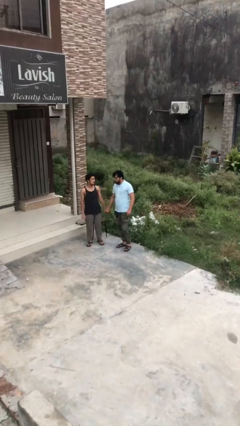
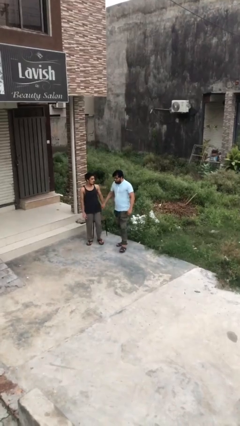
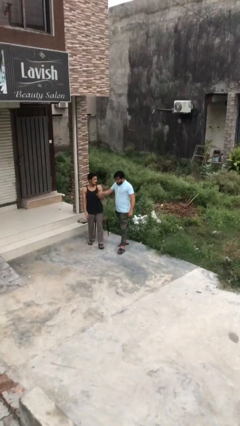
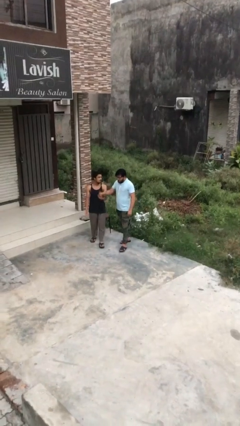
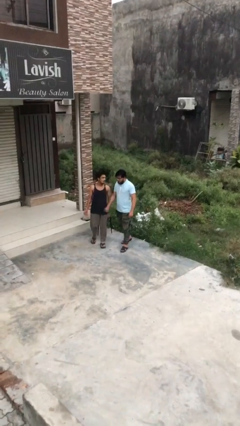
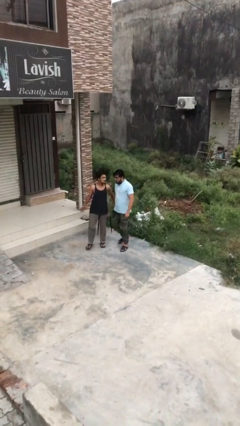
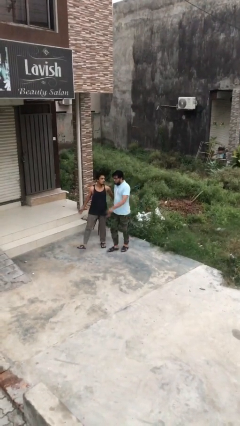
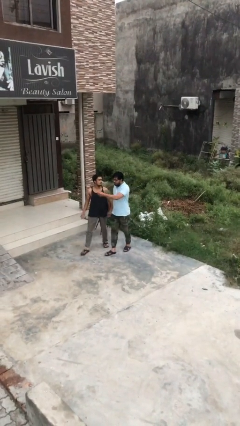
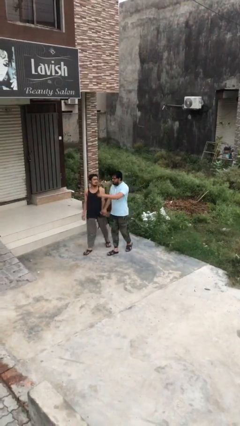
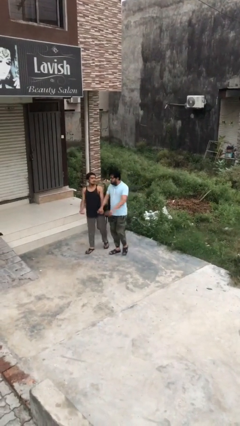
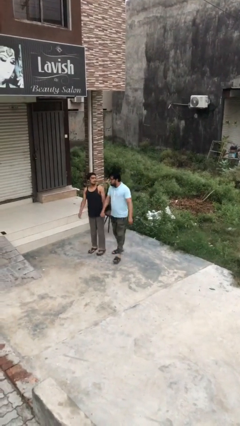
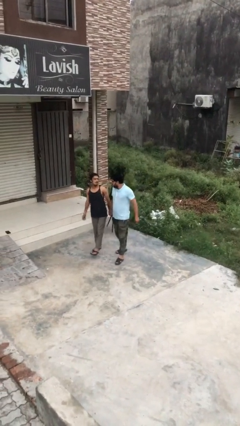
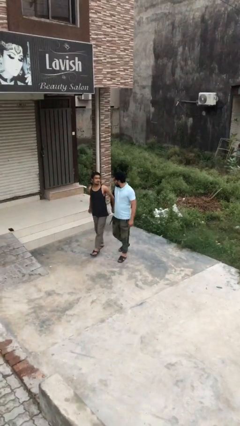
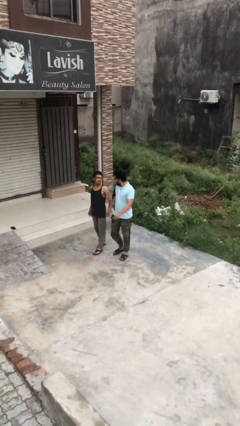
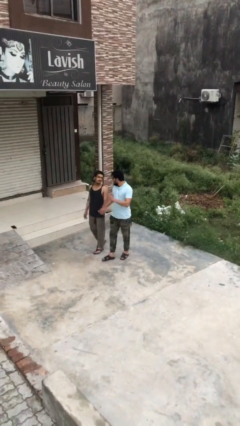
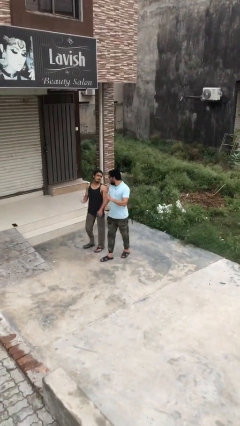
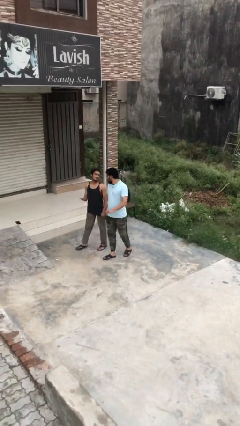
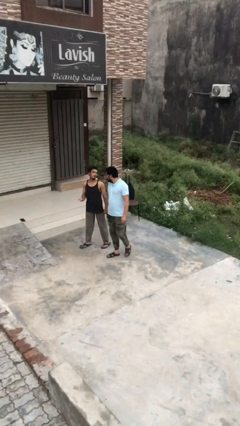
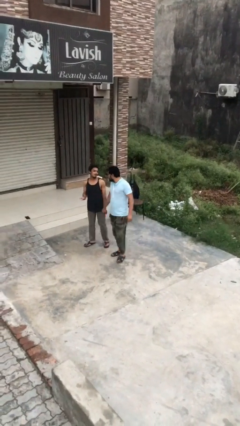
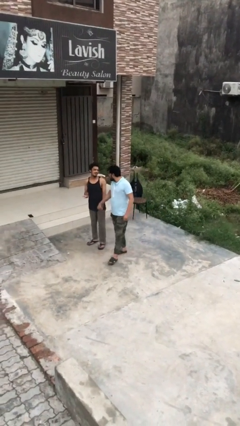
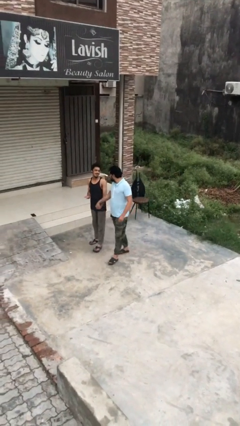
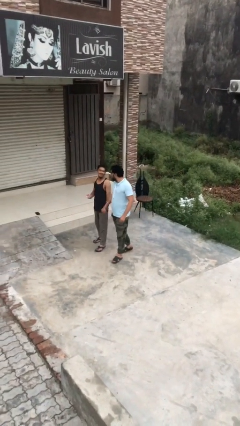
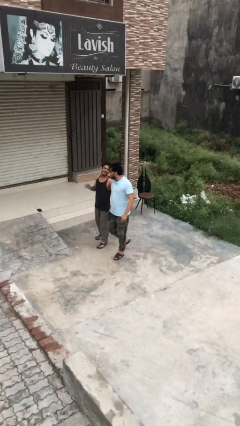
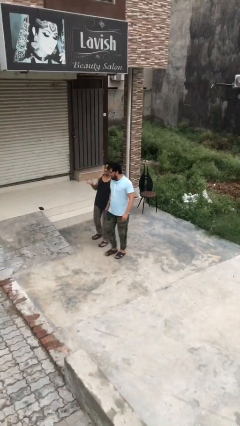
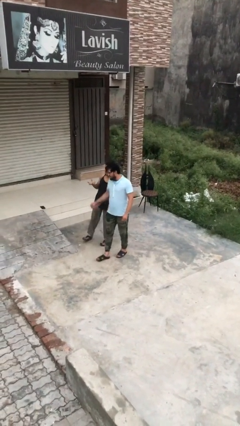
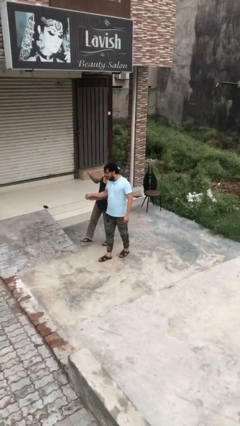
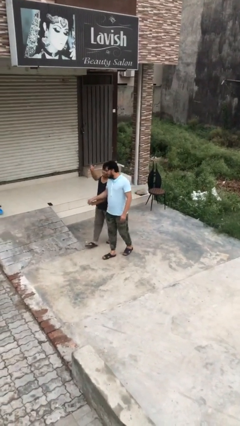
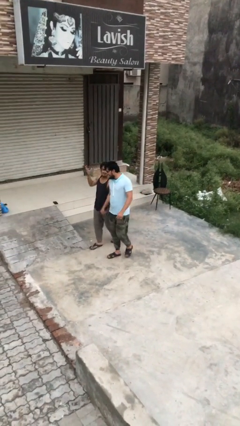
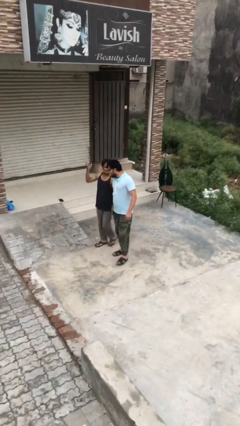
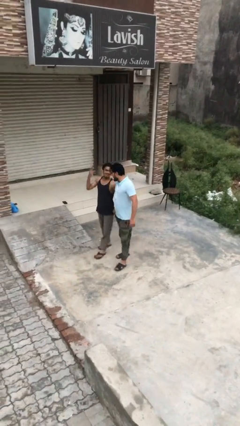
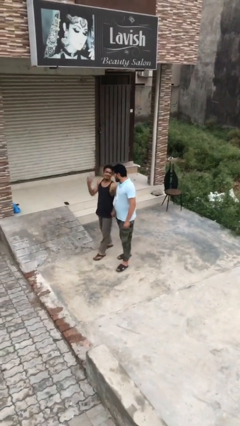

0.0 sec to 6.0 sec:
person holds hand

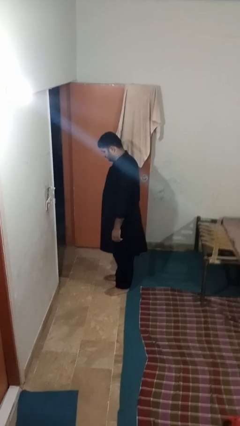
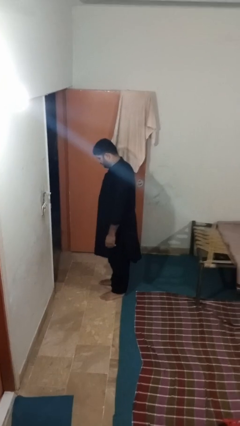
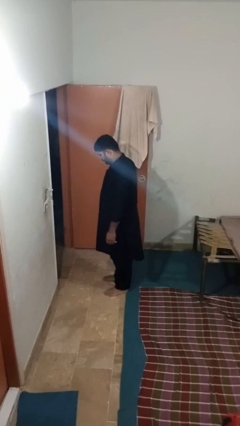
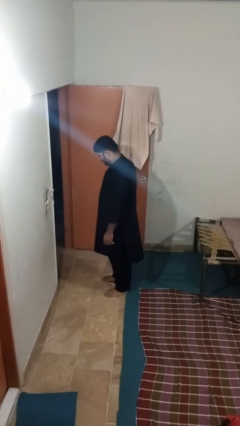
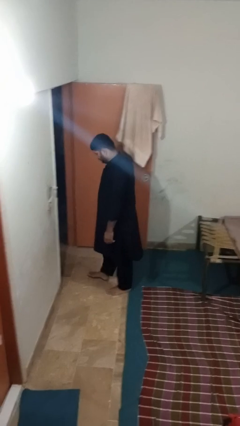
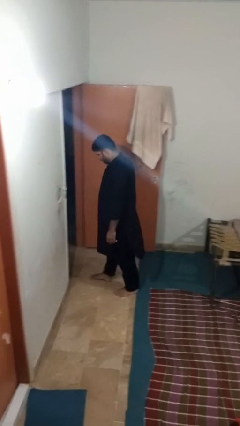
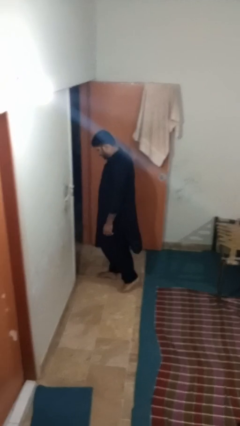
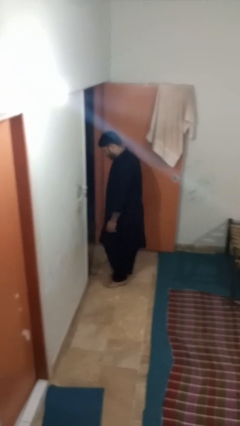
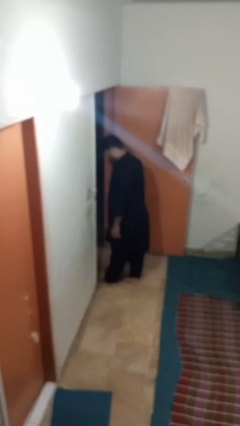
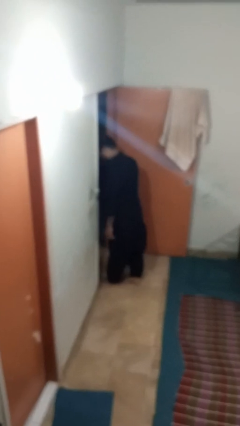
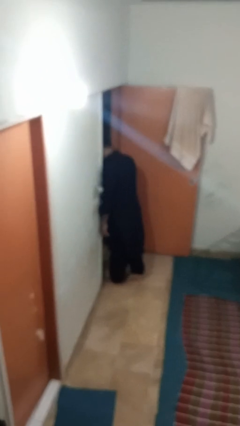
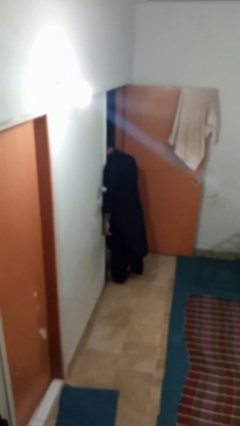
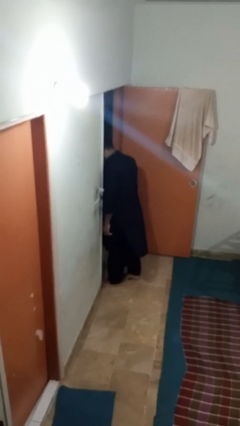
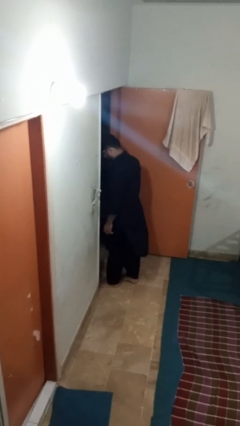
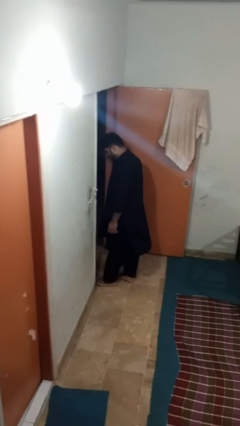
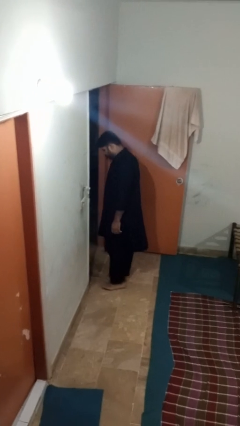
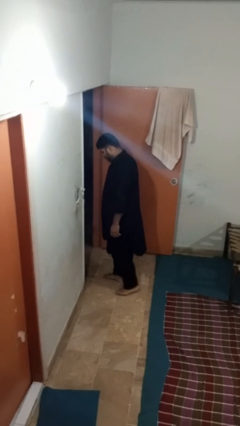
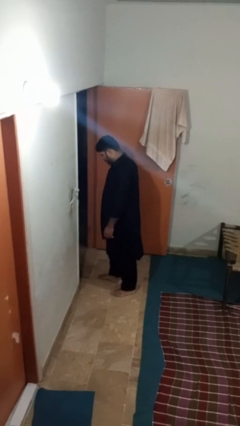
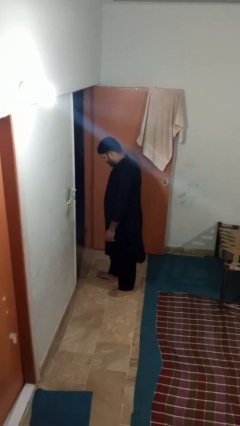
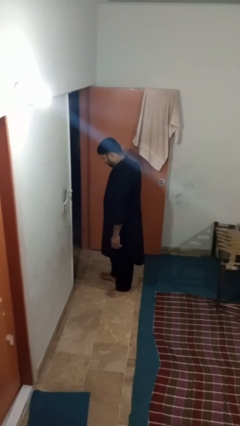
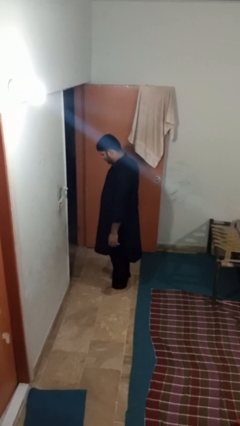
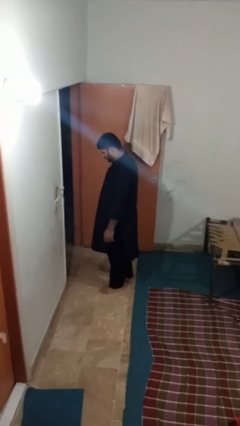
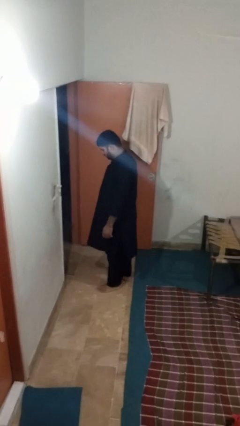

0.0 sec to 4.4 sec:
person bumps into wall

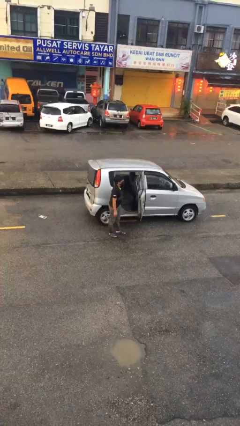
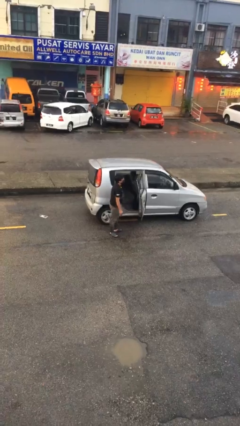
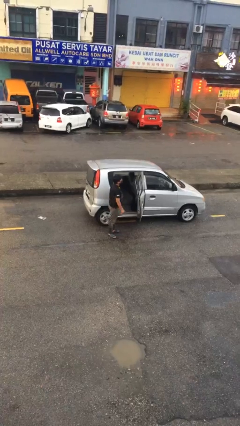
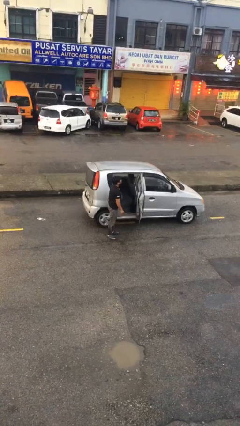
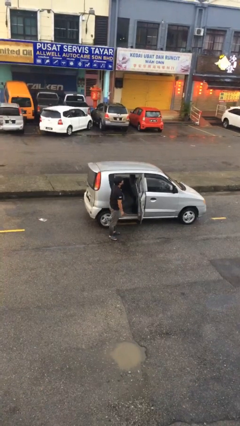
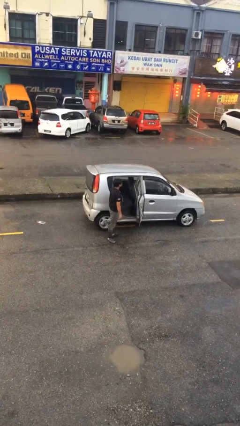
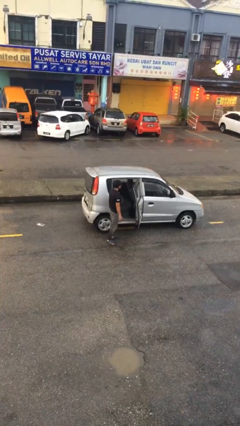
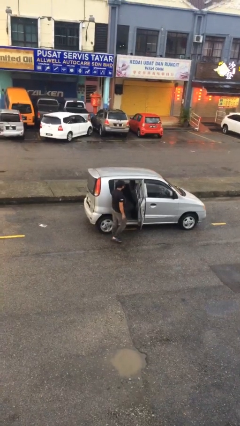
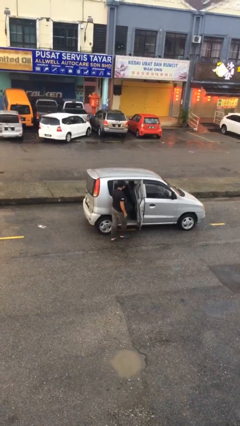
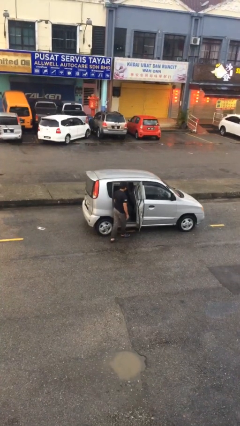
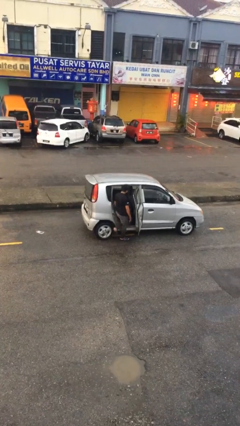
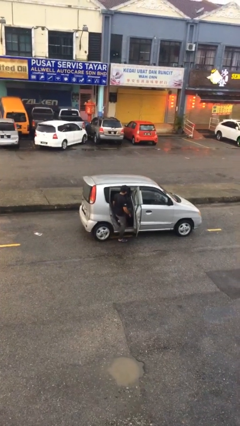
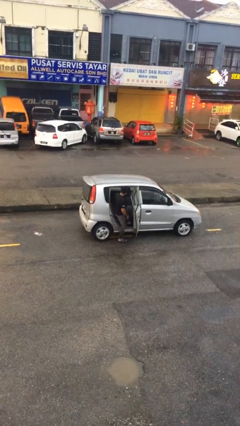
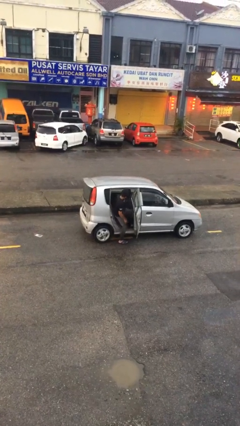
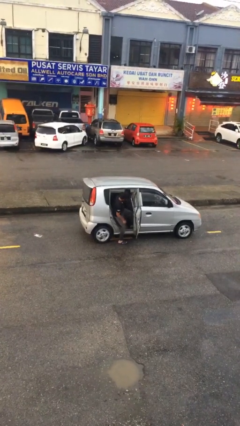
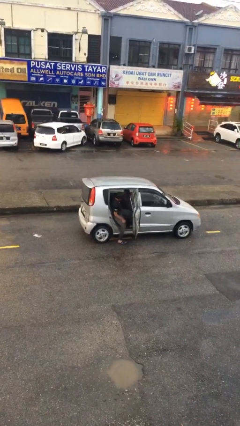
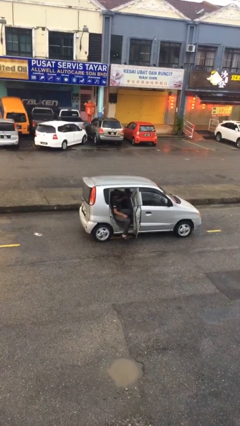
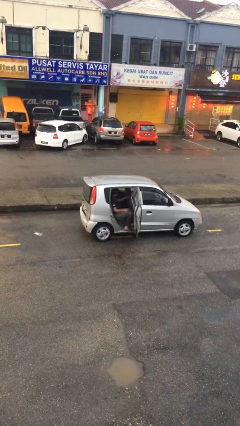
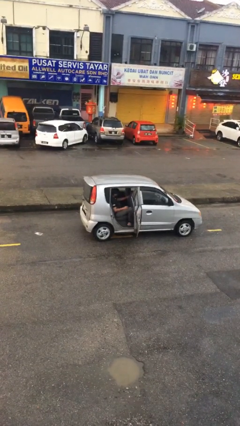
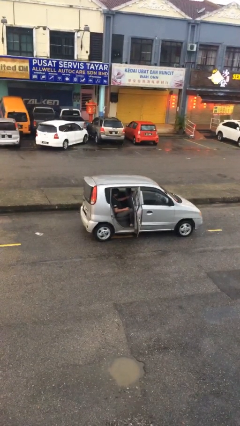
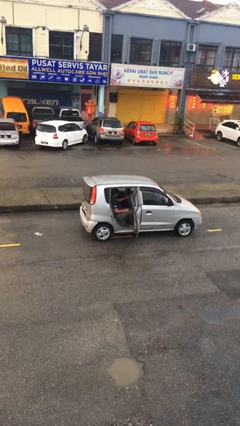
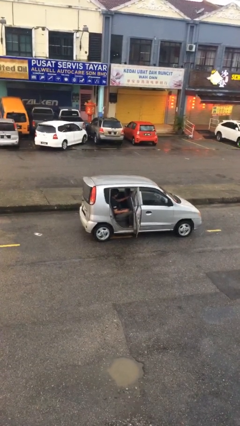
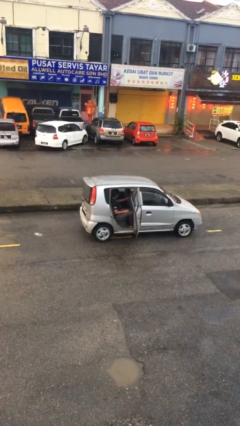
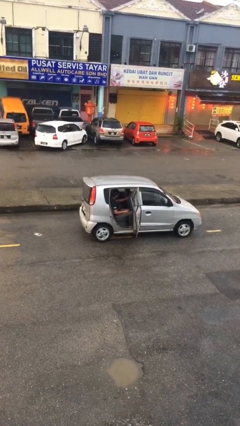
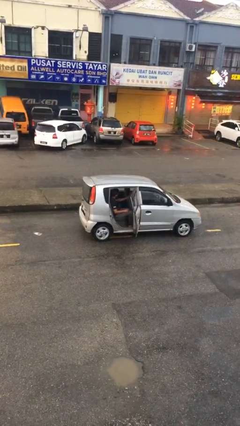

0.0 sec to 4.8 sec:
person enters car

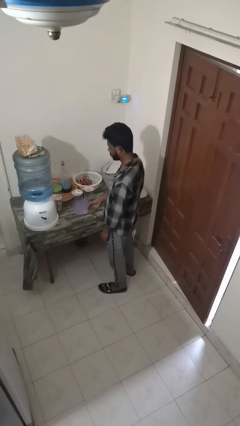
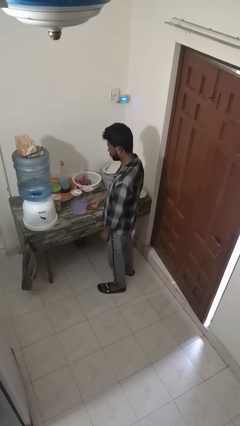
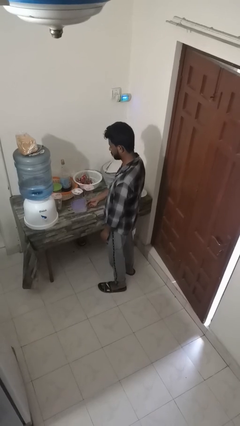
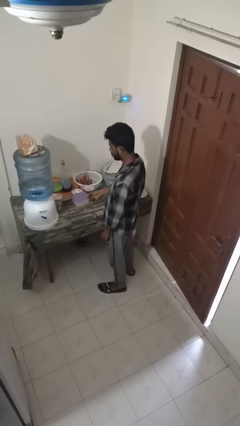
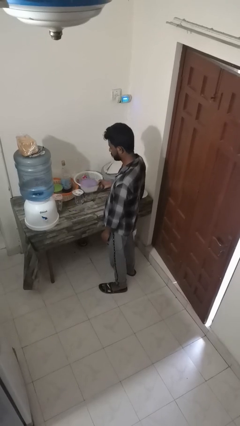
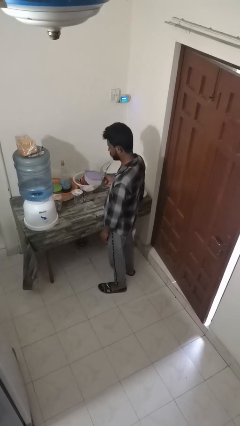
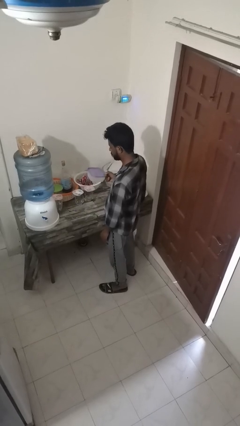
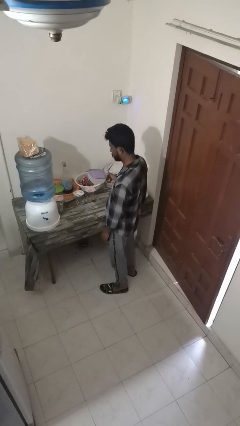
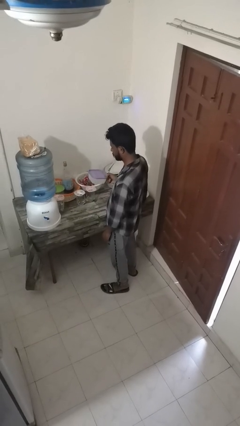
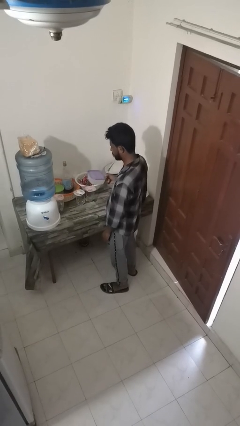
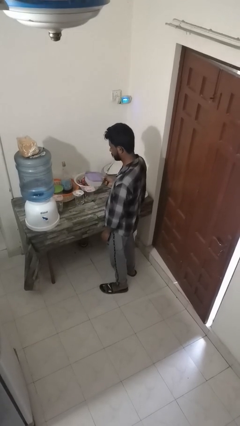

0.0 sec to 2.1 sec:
person picks up object from countertop

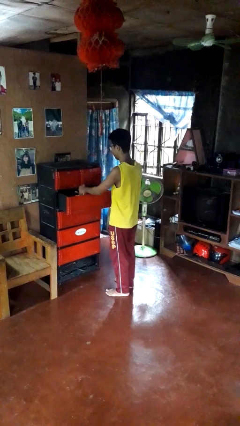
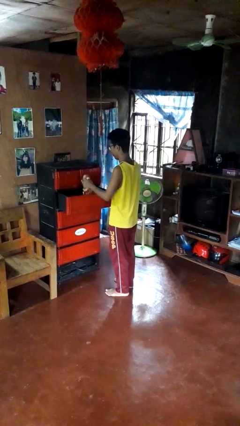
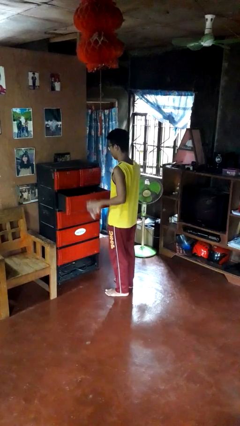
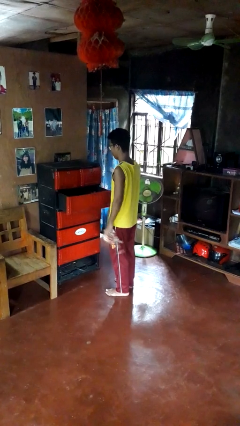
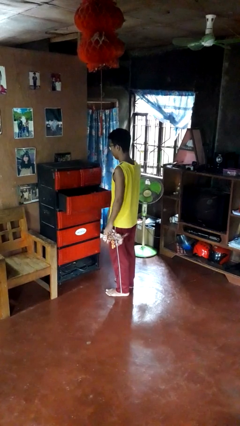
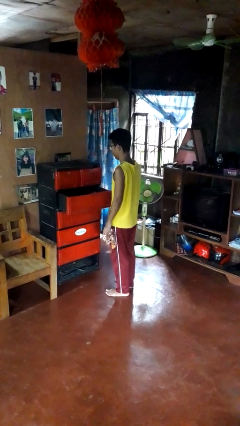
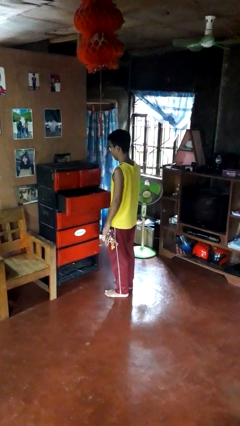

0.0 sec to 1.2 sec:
person takes clothes from dresser
